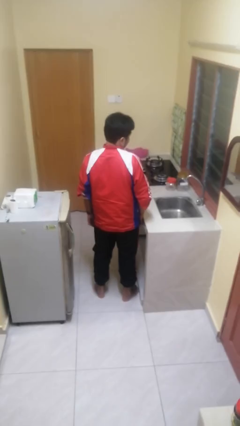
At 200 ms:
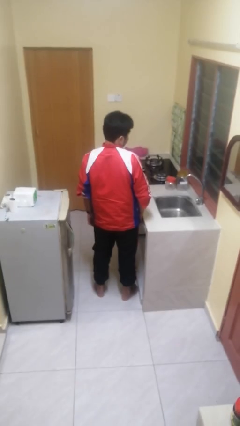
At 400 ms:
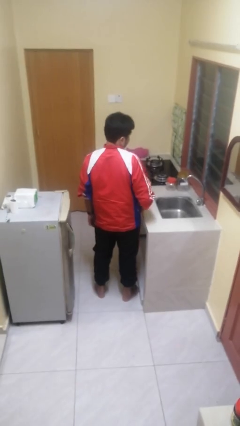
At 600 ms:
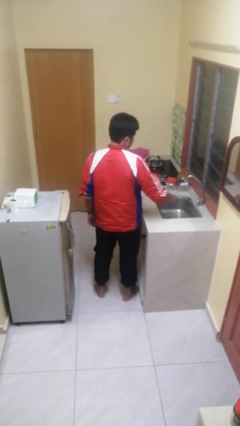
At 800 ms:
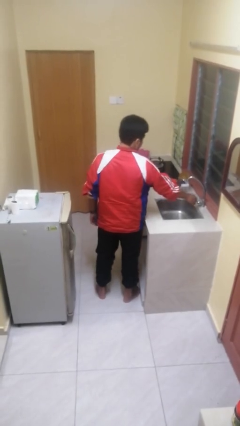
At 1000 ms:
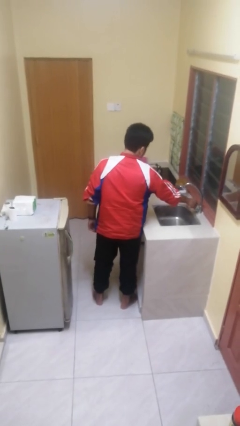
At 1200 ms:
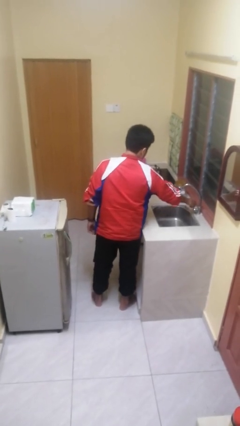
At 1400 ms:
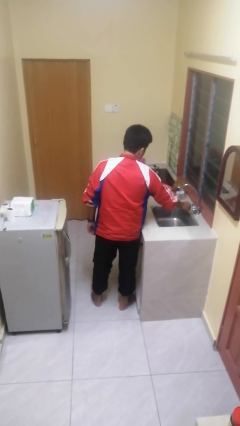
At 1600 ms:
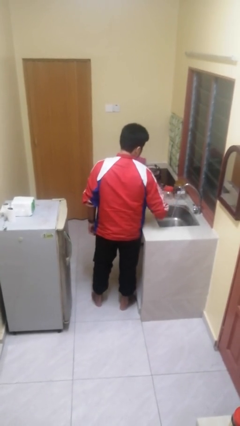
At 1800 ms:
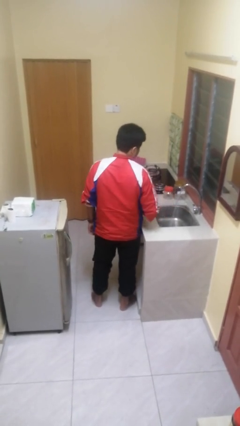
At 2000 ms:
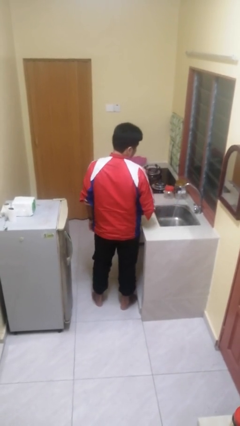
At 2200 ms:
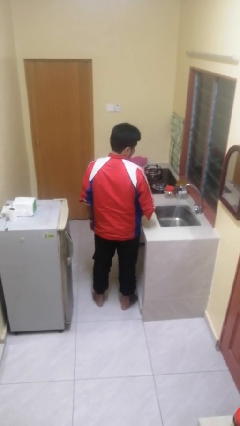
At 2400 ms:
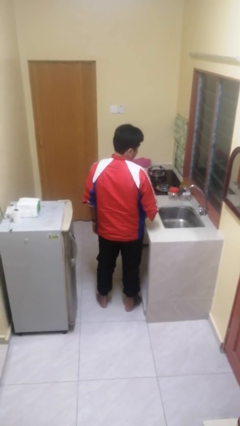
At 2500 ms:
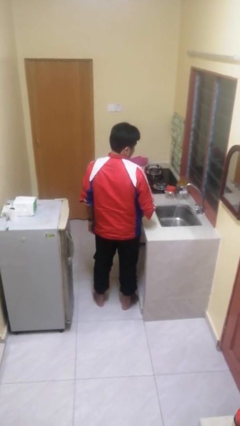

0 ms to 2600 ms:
person turns on faucet

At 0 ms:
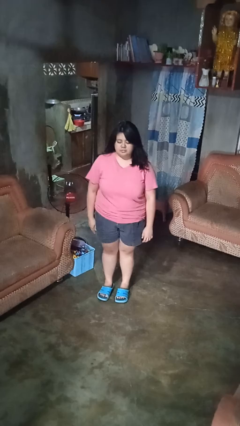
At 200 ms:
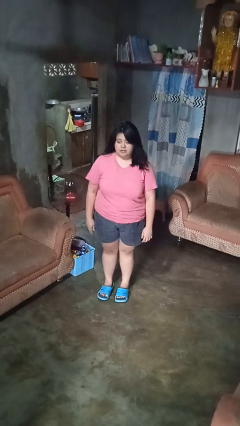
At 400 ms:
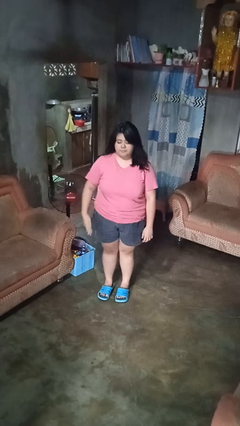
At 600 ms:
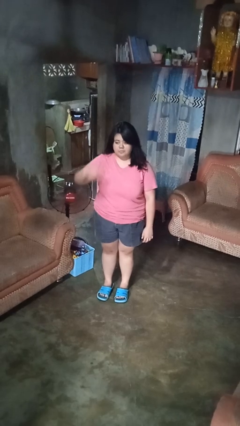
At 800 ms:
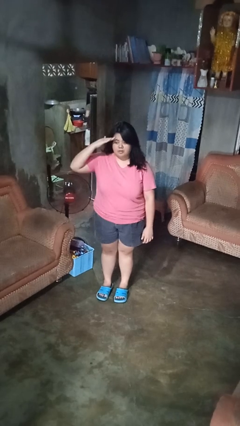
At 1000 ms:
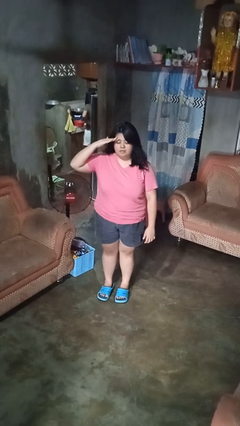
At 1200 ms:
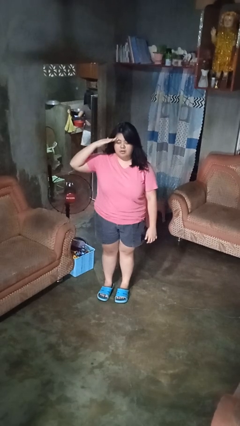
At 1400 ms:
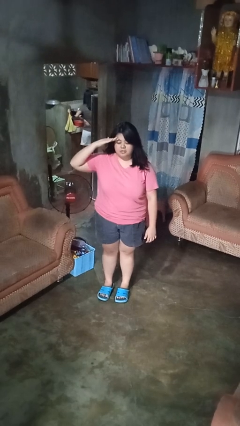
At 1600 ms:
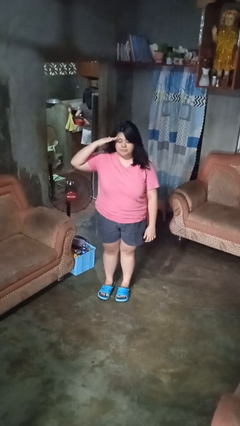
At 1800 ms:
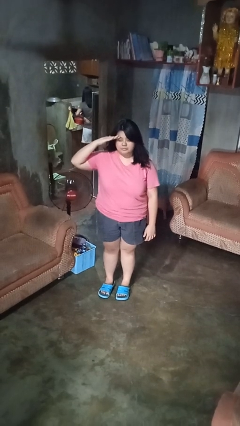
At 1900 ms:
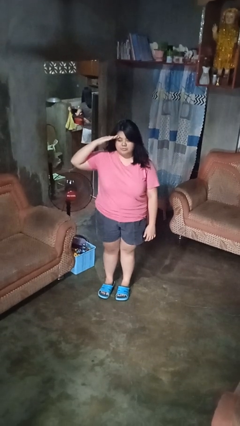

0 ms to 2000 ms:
person salutes

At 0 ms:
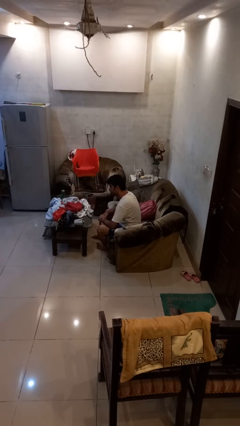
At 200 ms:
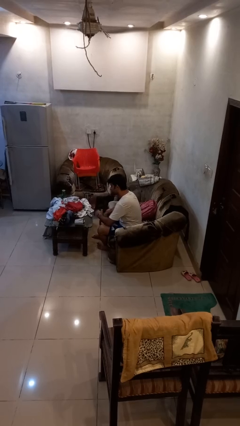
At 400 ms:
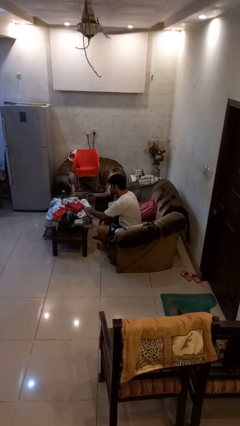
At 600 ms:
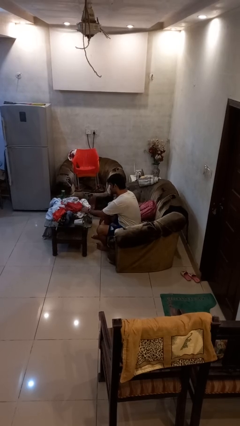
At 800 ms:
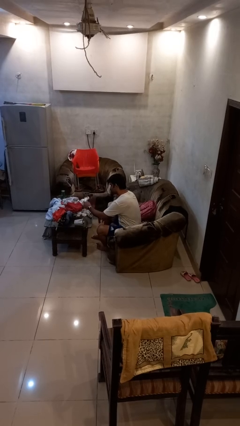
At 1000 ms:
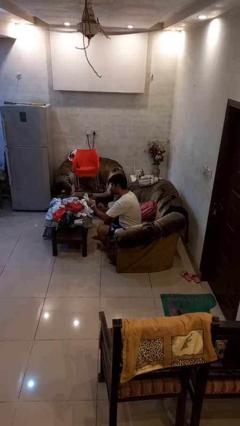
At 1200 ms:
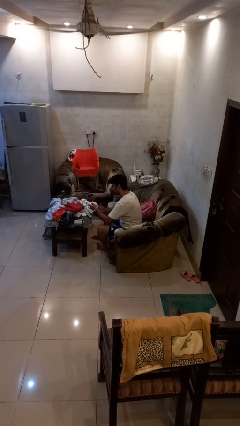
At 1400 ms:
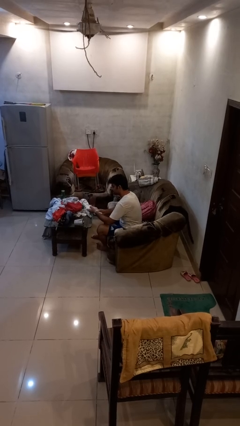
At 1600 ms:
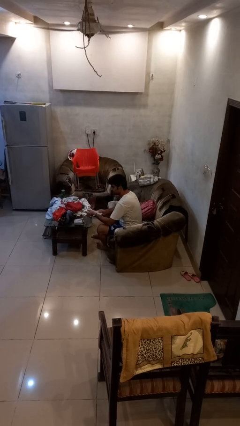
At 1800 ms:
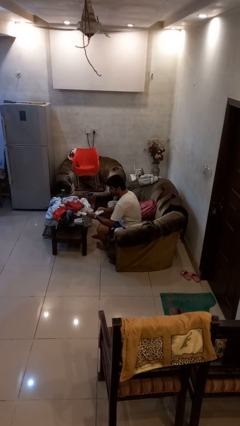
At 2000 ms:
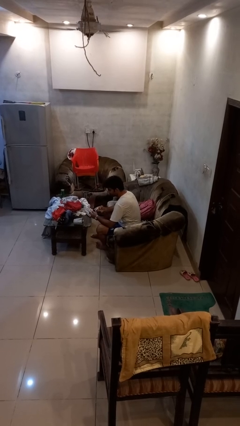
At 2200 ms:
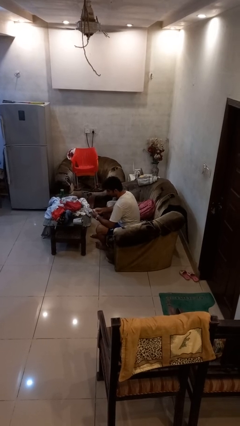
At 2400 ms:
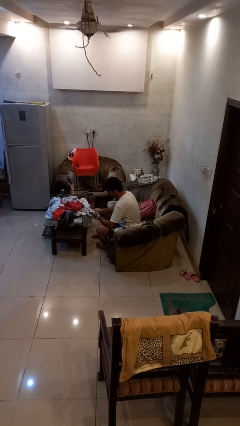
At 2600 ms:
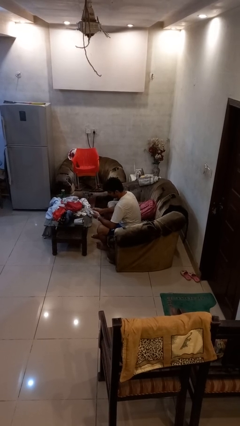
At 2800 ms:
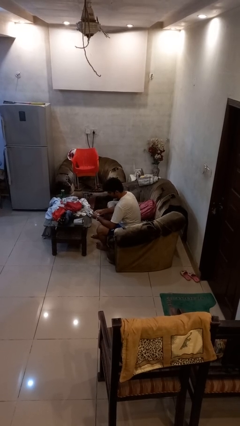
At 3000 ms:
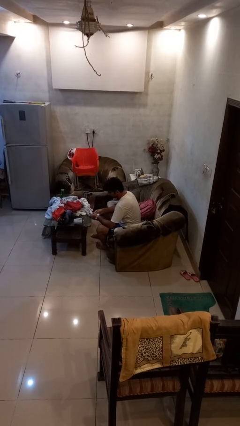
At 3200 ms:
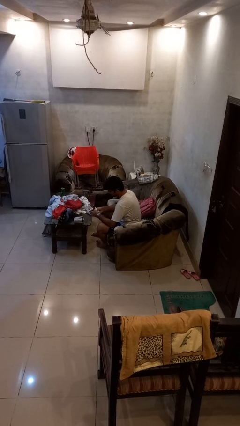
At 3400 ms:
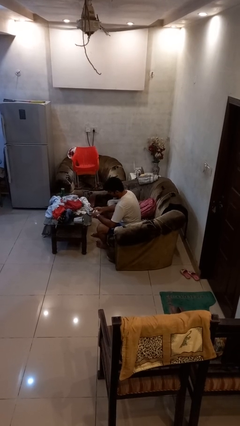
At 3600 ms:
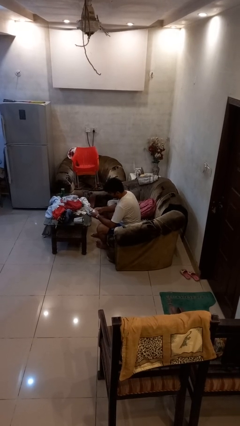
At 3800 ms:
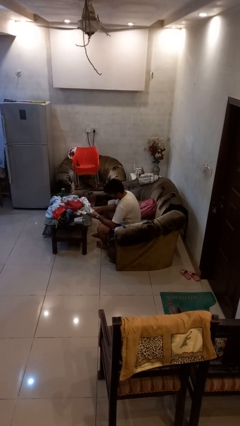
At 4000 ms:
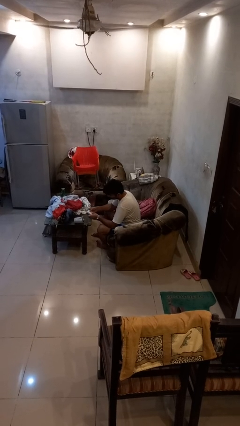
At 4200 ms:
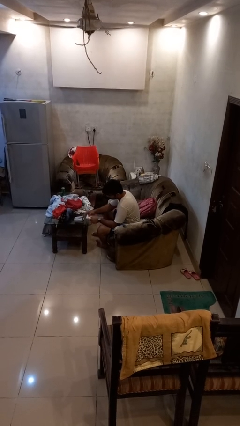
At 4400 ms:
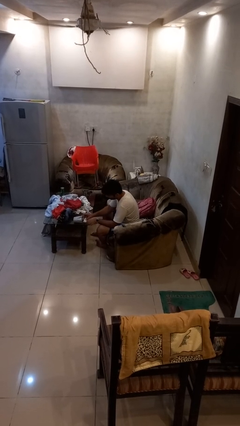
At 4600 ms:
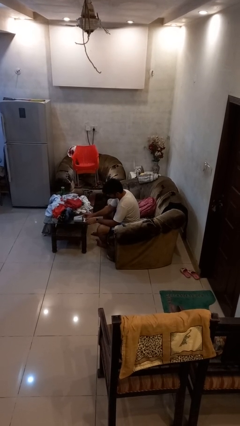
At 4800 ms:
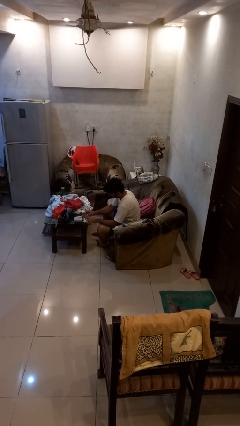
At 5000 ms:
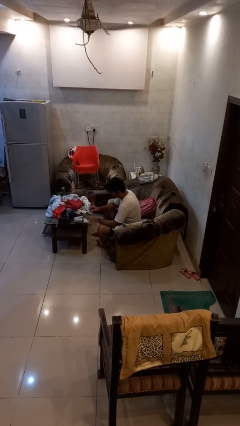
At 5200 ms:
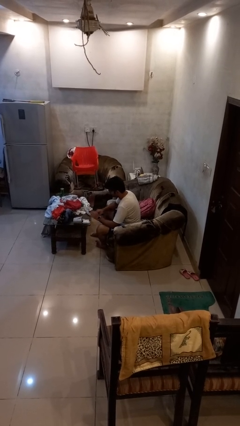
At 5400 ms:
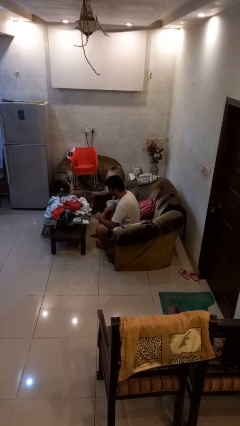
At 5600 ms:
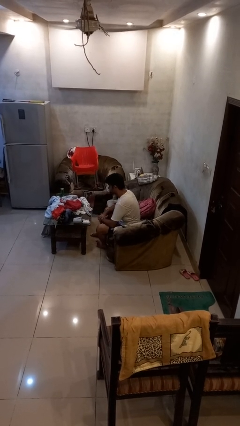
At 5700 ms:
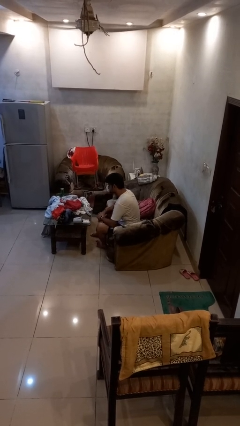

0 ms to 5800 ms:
person folds socks

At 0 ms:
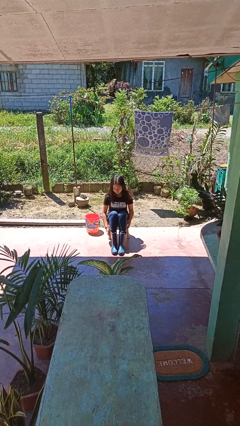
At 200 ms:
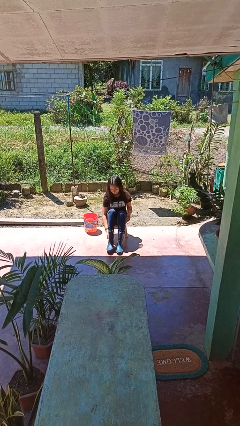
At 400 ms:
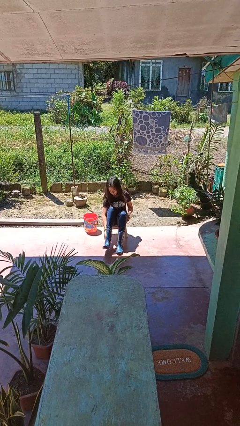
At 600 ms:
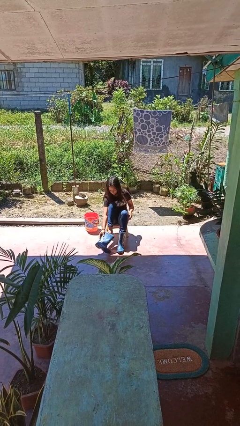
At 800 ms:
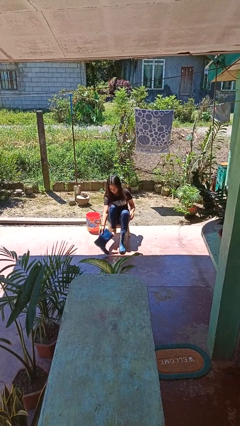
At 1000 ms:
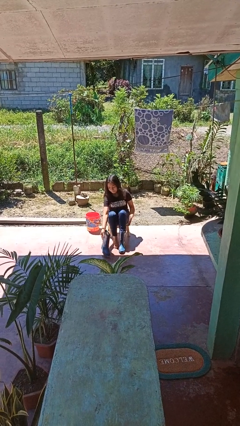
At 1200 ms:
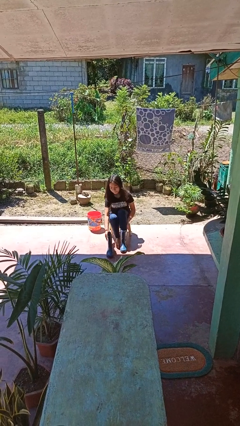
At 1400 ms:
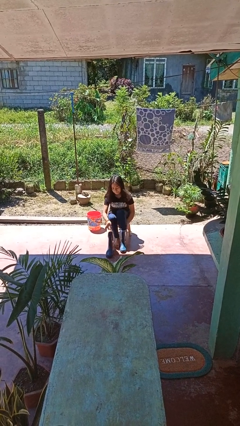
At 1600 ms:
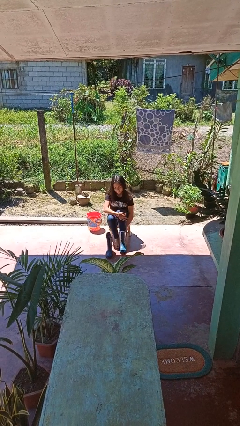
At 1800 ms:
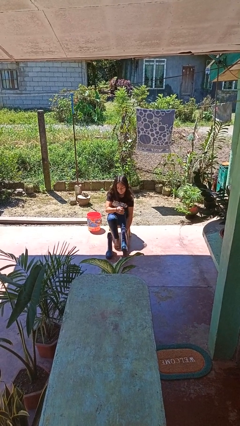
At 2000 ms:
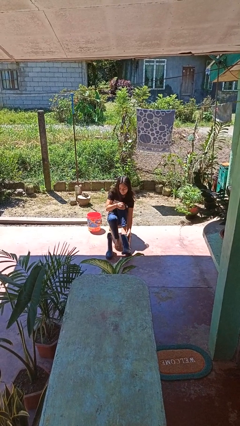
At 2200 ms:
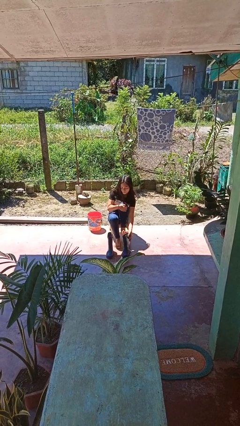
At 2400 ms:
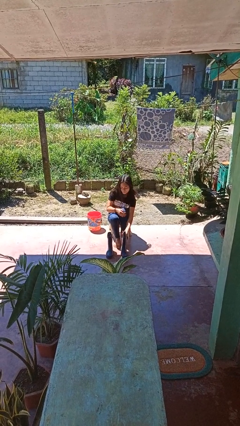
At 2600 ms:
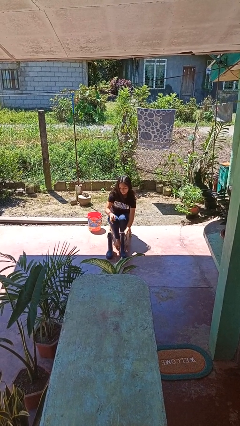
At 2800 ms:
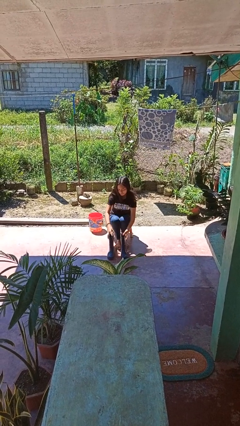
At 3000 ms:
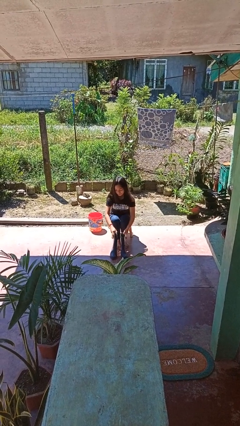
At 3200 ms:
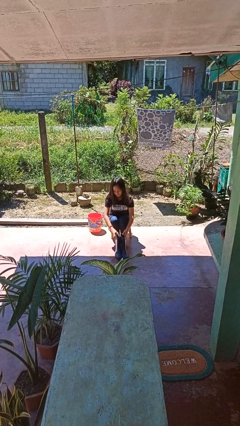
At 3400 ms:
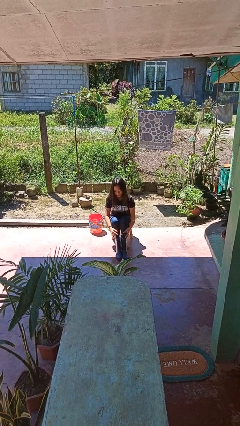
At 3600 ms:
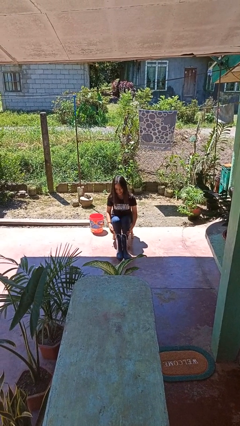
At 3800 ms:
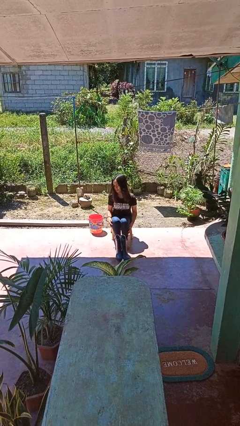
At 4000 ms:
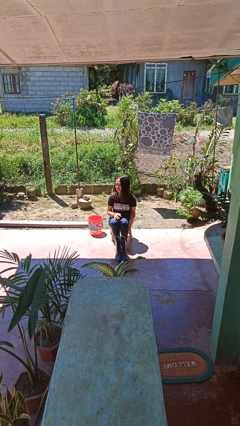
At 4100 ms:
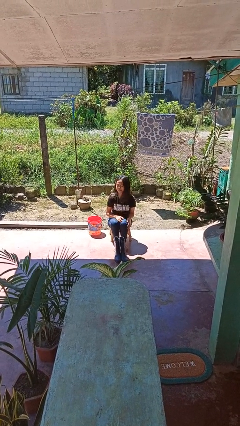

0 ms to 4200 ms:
person takes off boots

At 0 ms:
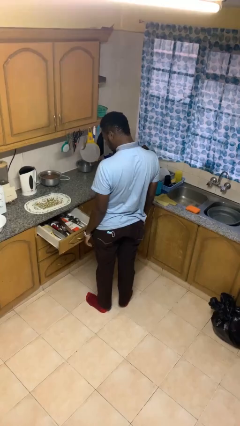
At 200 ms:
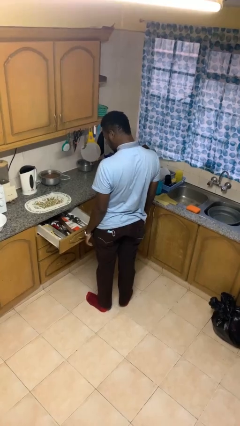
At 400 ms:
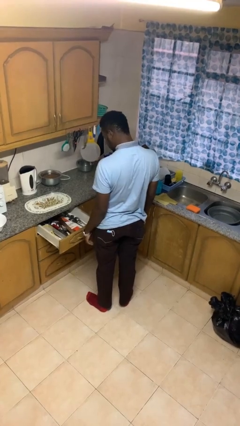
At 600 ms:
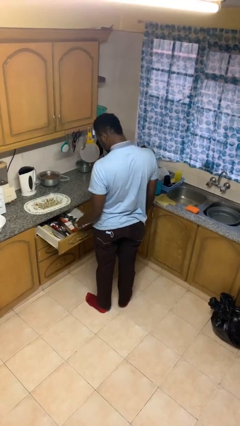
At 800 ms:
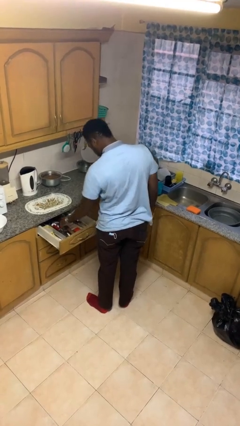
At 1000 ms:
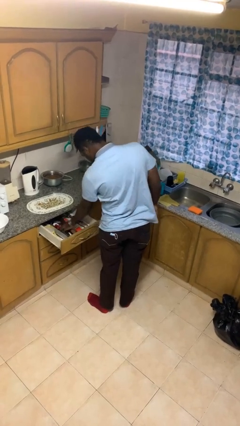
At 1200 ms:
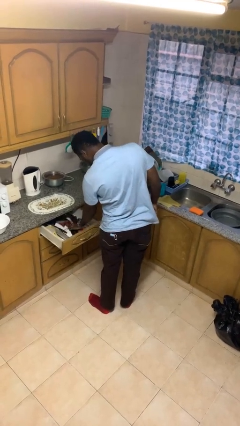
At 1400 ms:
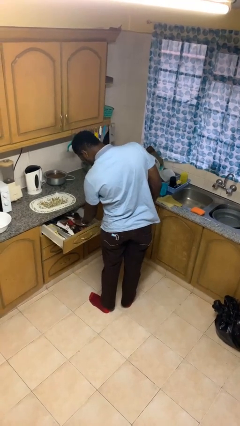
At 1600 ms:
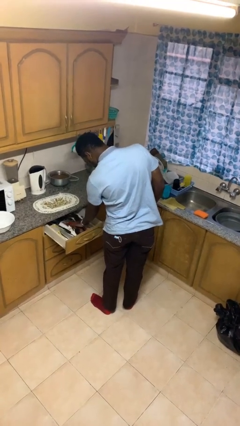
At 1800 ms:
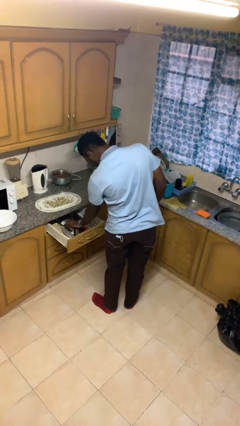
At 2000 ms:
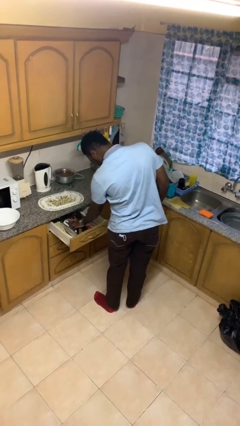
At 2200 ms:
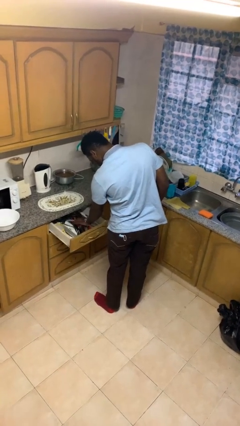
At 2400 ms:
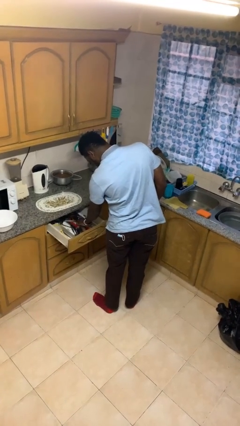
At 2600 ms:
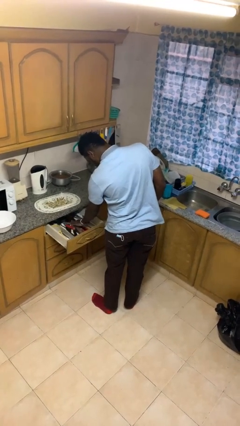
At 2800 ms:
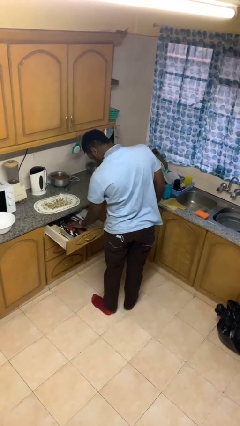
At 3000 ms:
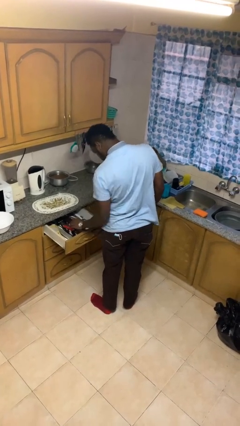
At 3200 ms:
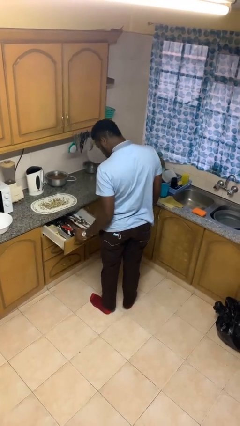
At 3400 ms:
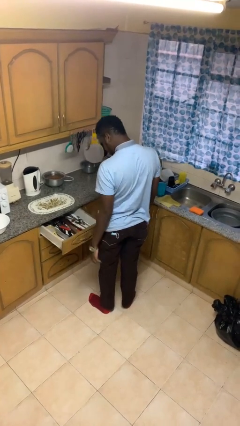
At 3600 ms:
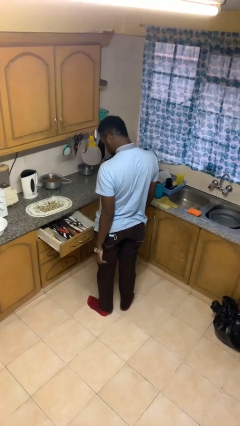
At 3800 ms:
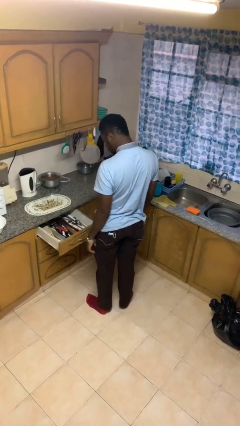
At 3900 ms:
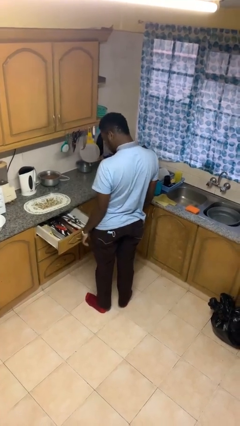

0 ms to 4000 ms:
person searches in kitchen drawer
